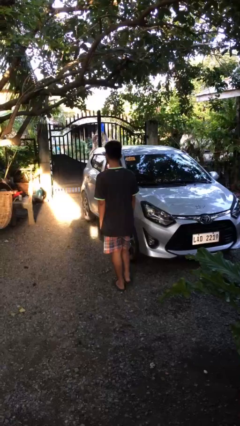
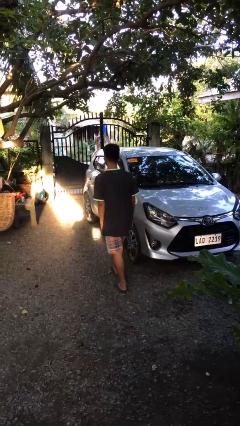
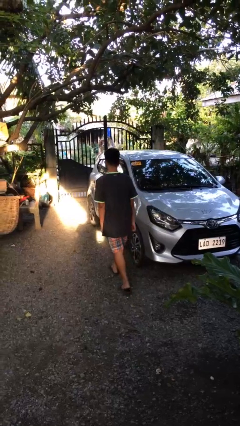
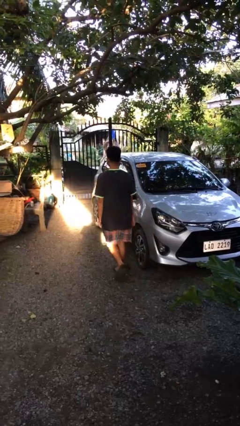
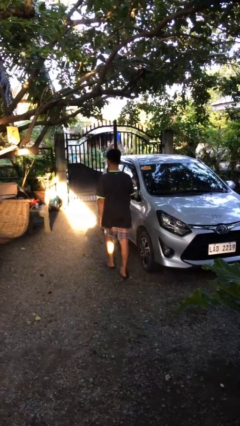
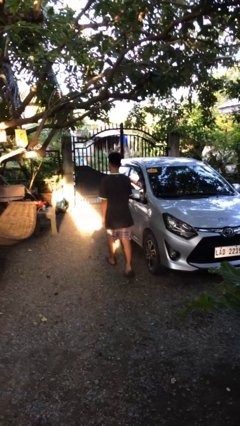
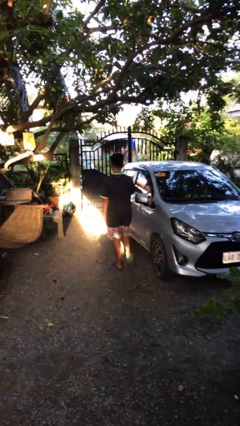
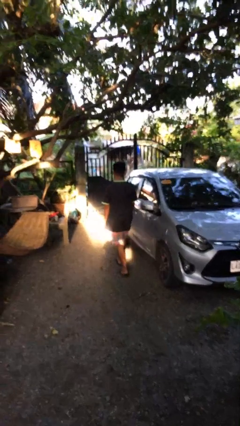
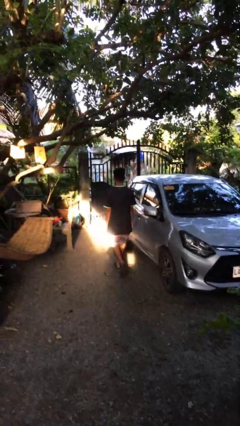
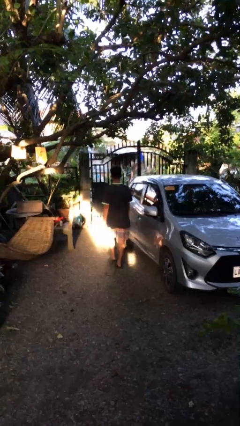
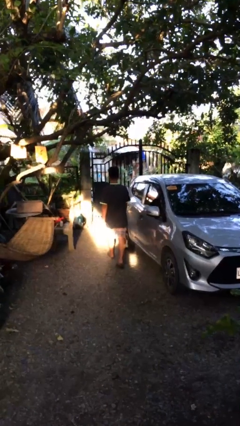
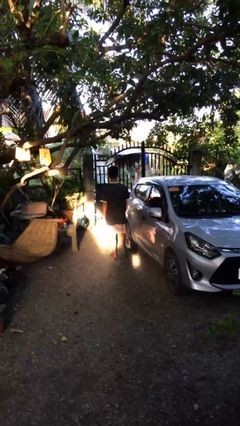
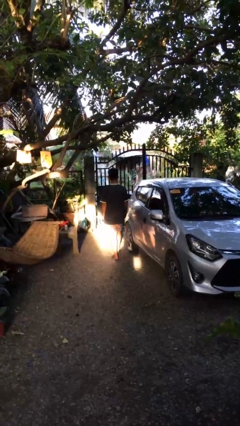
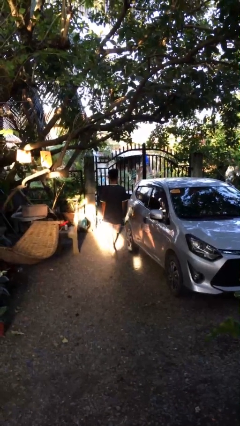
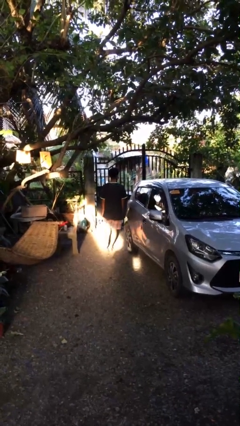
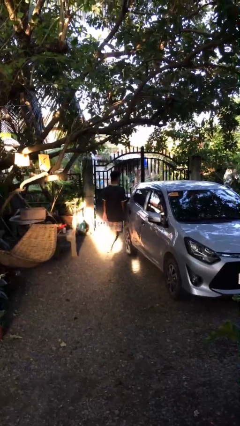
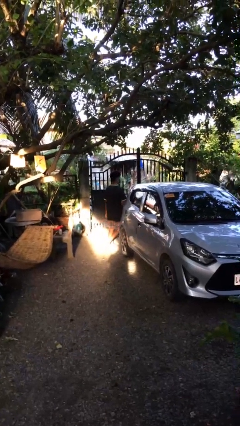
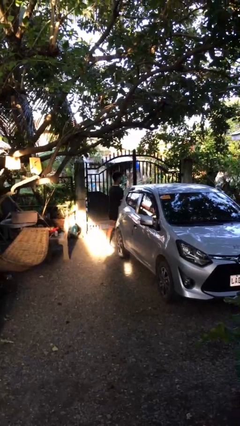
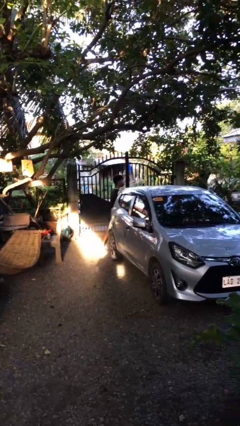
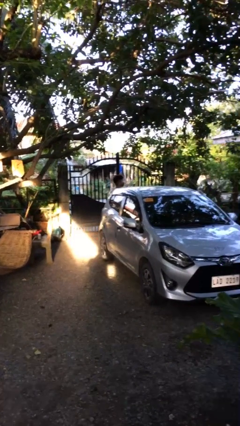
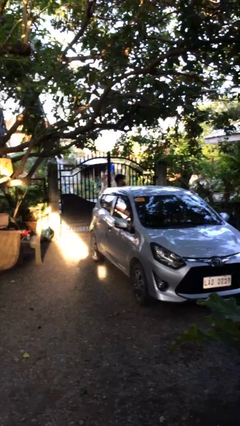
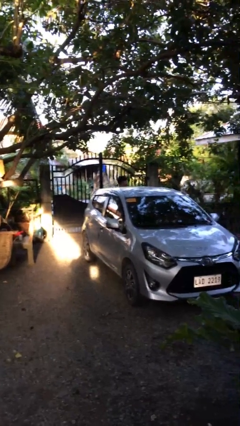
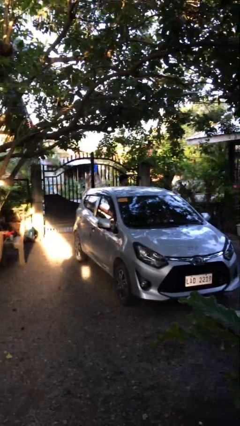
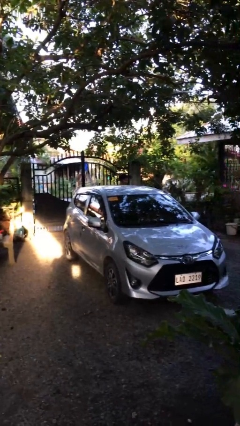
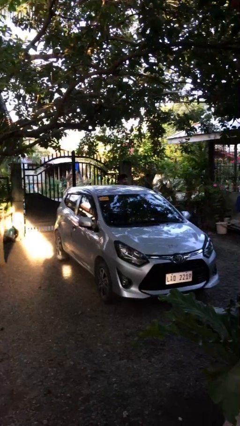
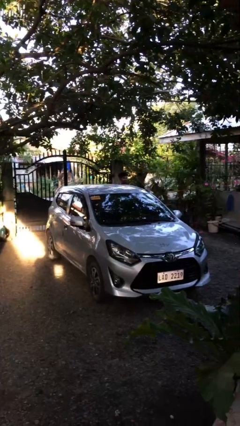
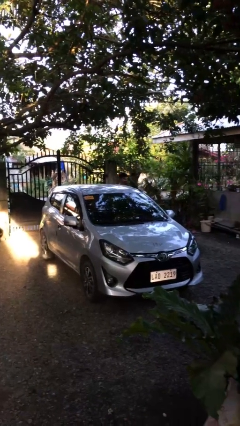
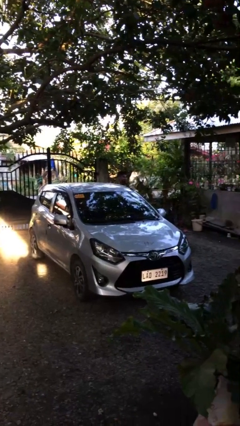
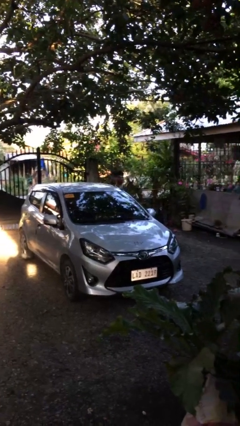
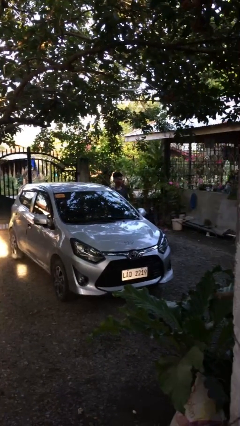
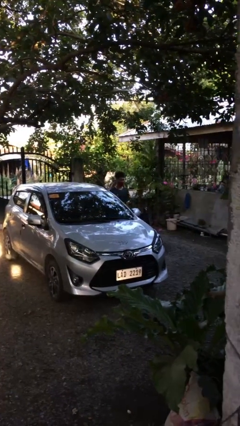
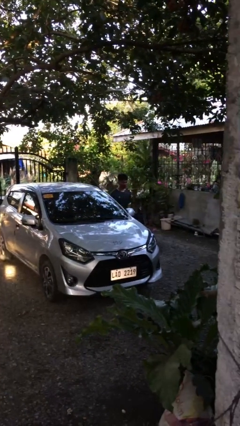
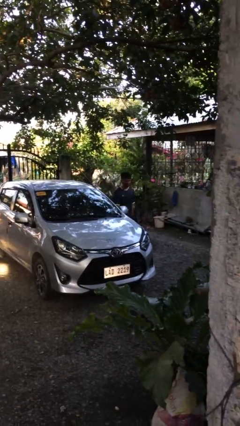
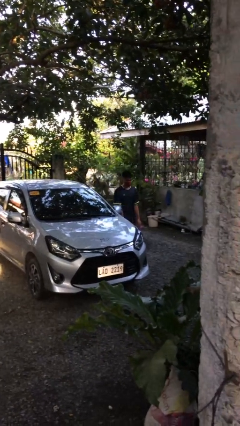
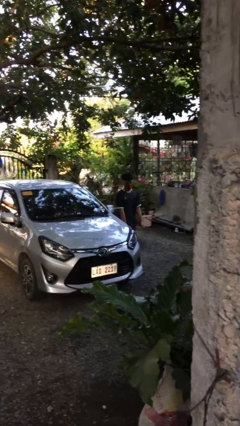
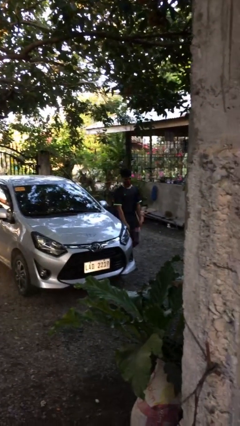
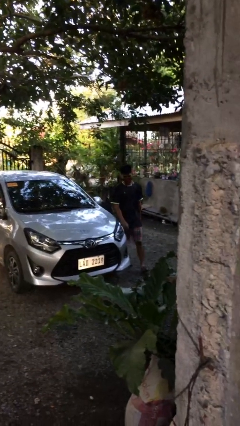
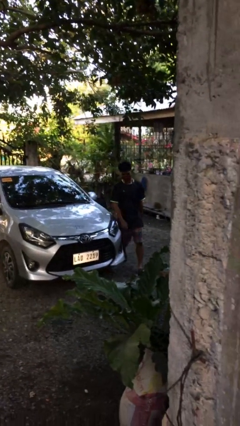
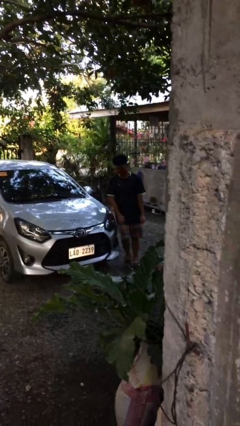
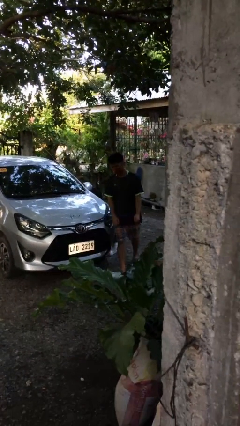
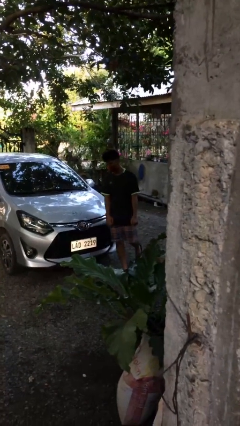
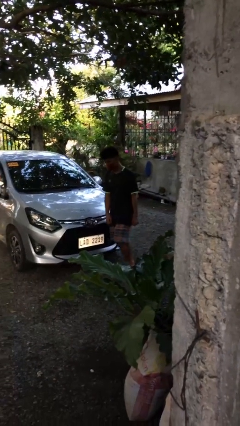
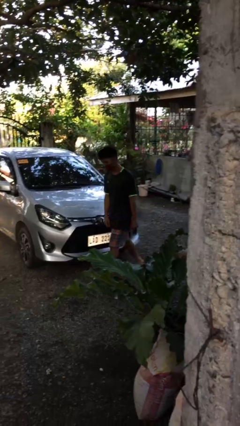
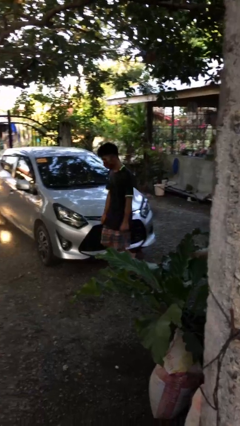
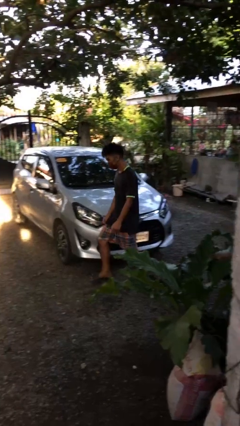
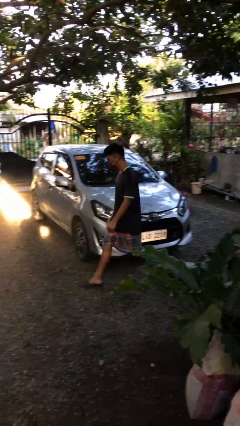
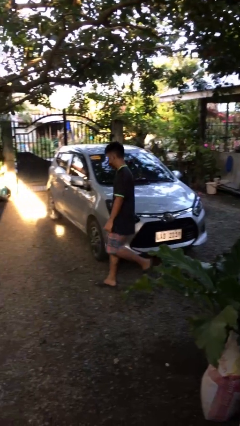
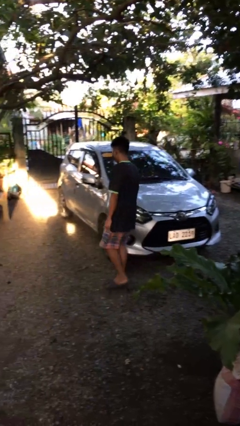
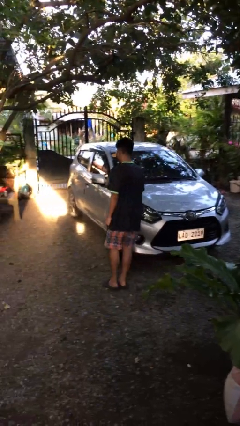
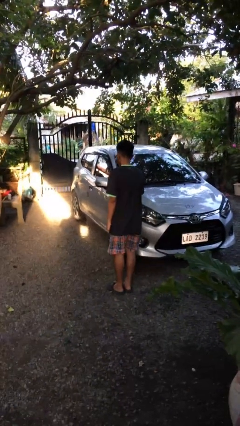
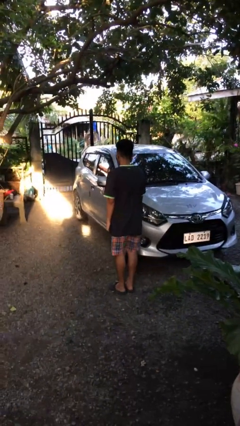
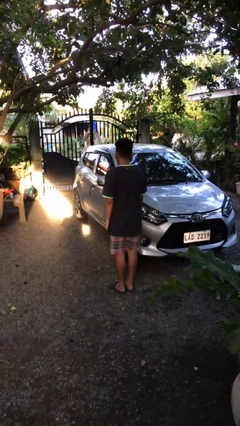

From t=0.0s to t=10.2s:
person walks around car

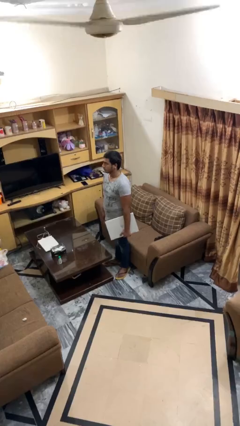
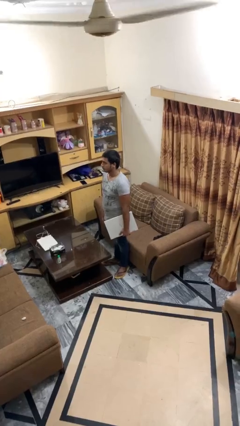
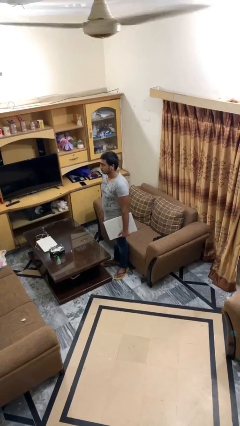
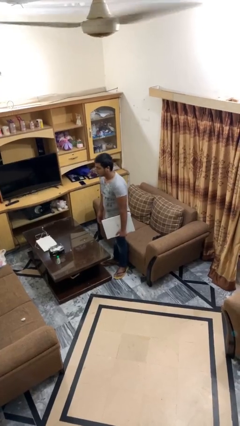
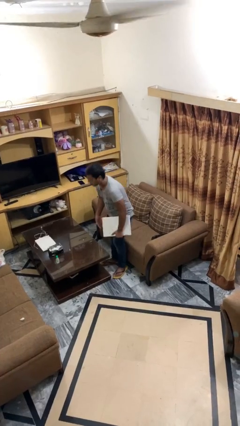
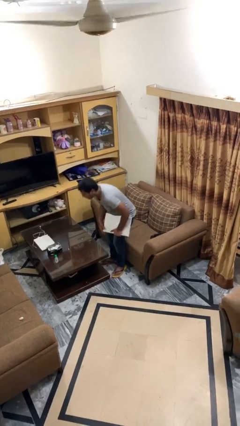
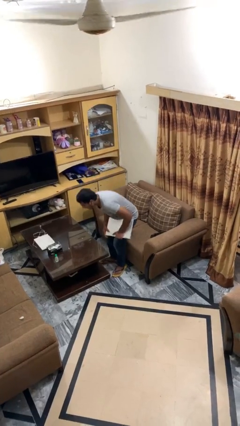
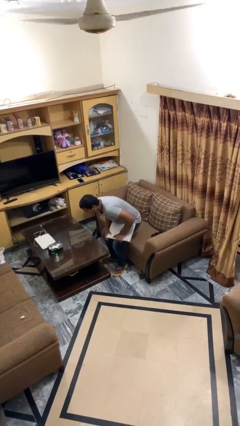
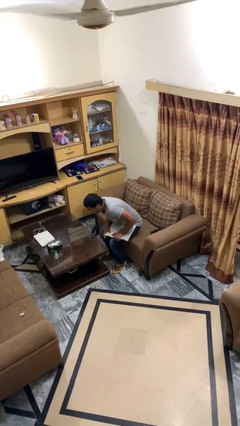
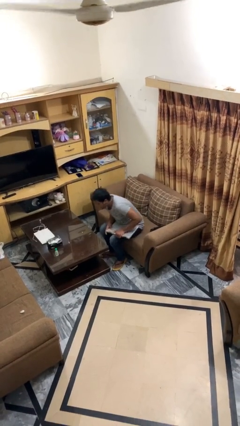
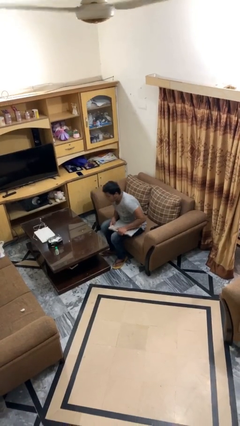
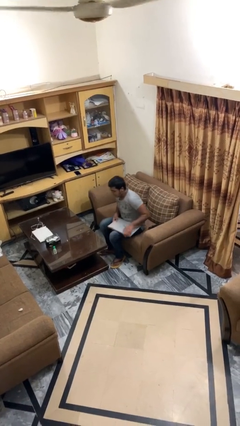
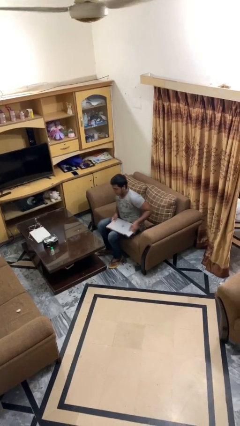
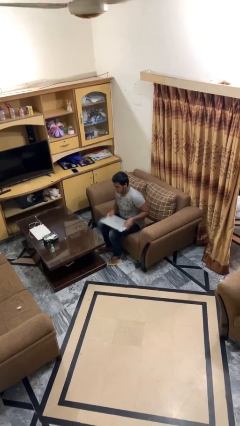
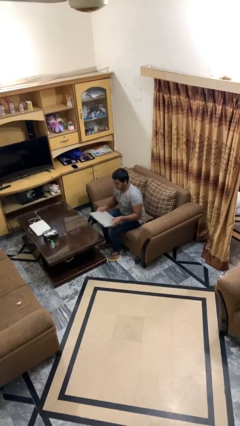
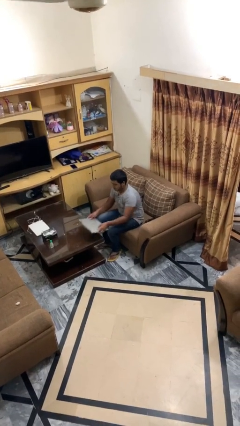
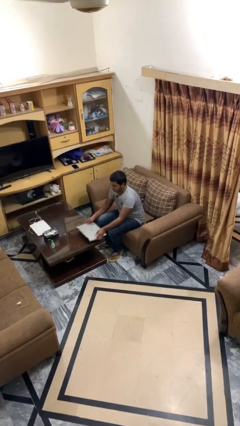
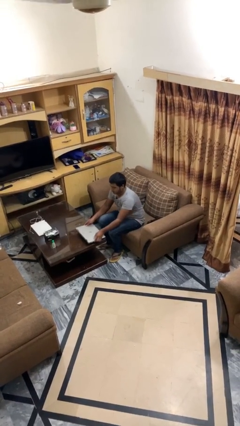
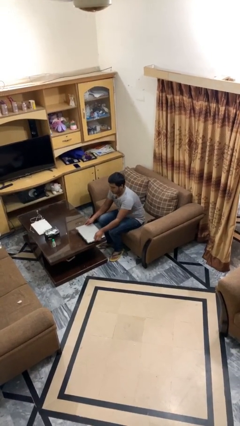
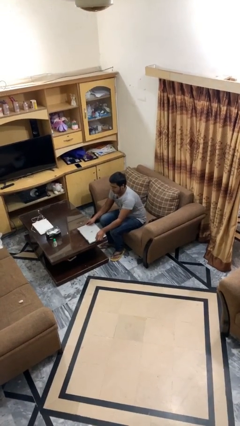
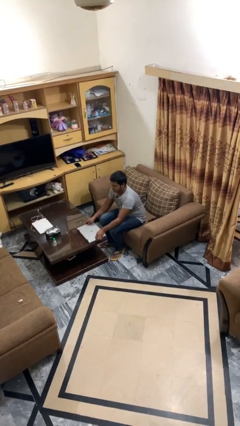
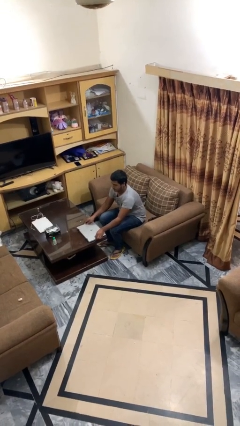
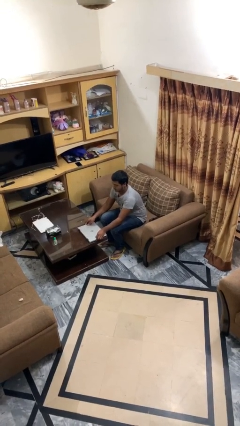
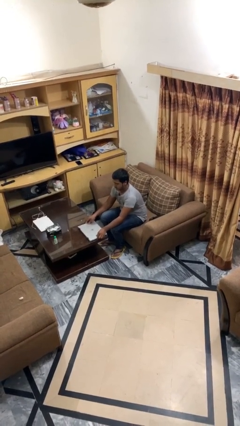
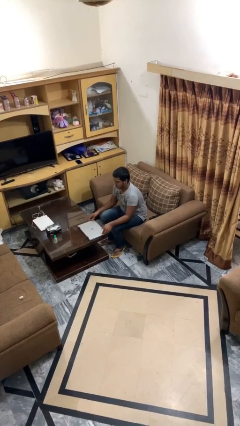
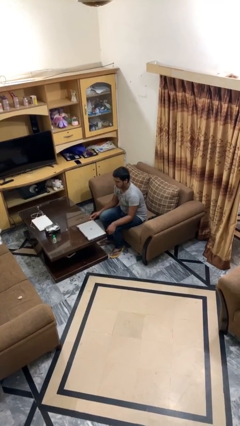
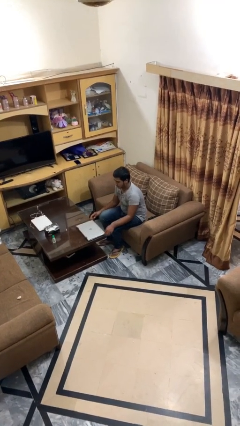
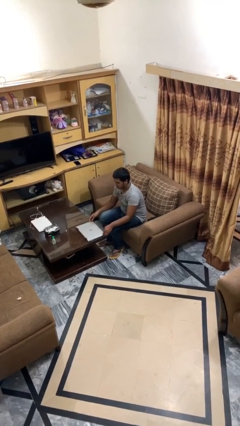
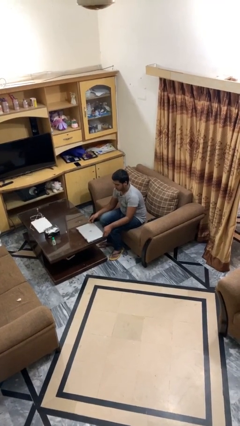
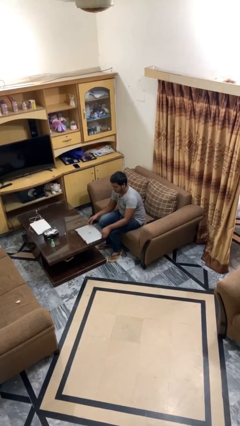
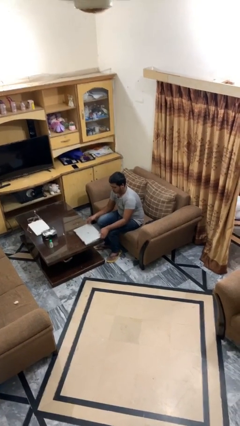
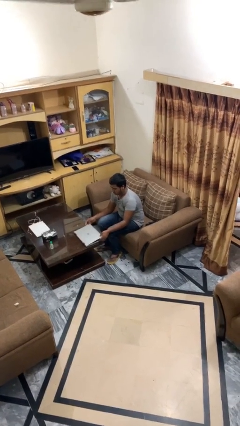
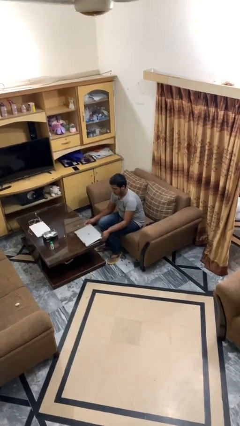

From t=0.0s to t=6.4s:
person sits down

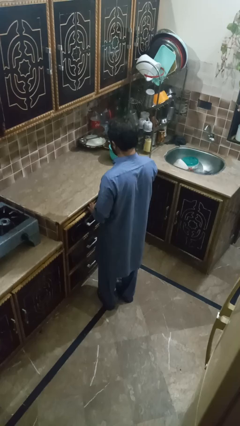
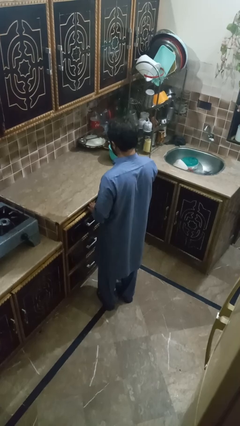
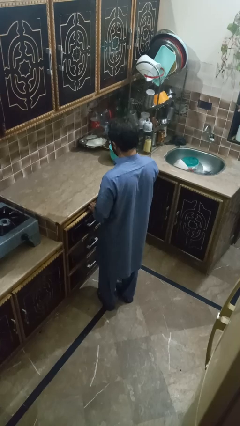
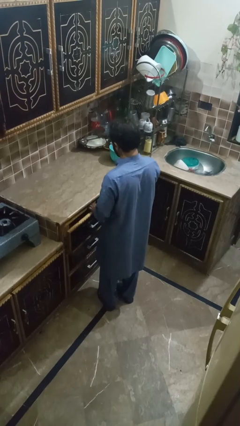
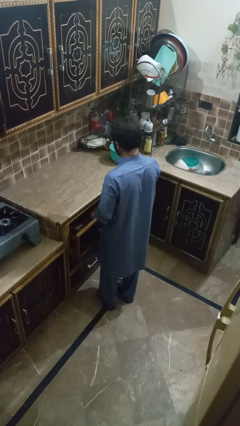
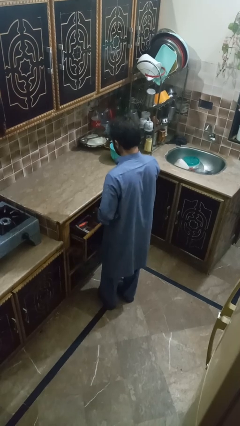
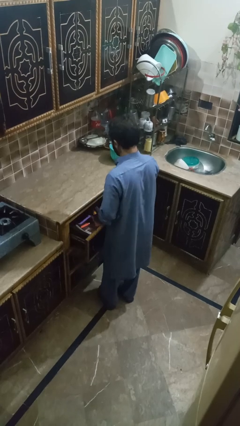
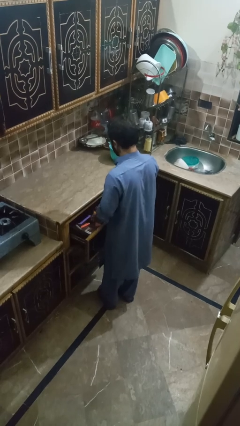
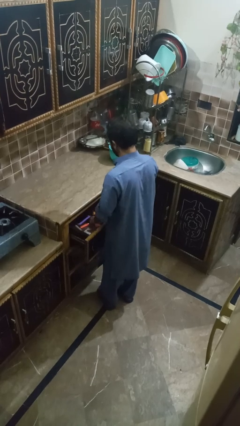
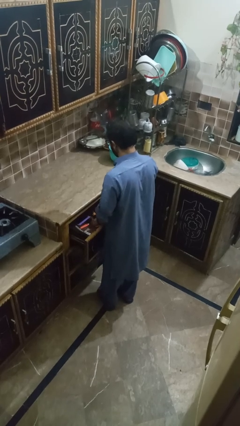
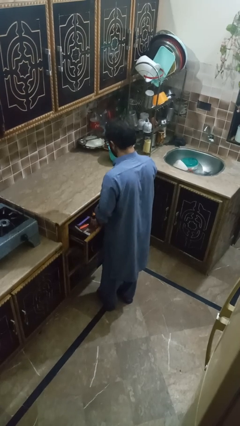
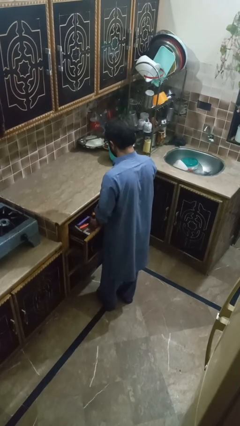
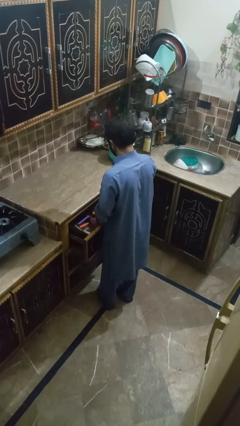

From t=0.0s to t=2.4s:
person searches in kitchen drawer
